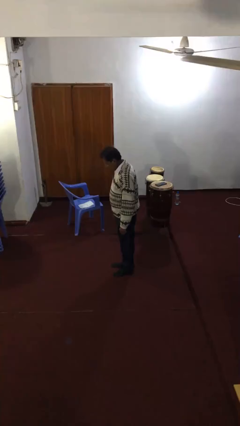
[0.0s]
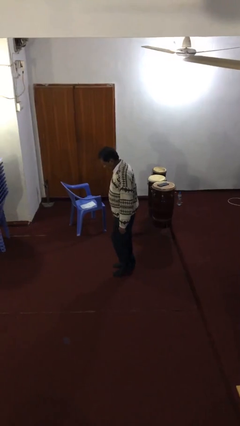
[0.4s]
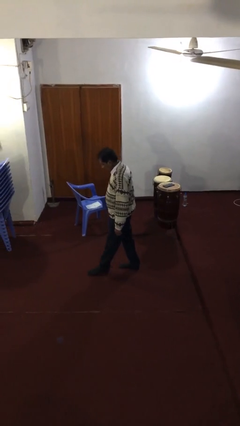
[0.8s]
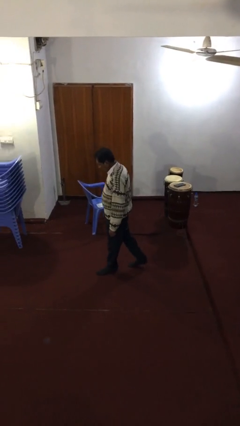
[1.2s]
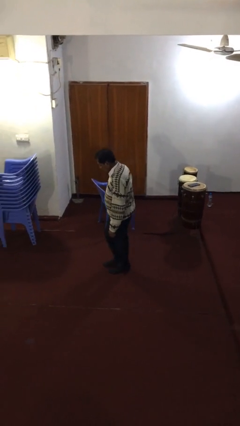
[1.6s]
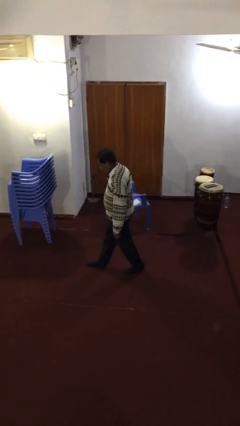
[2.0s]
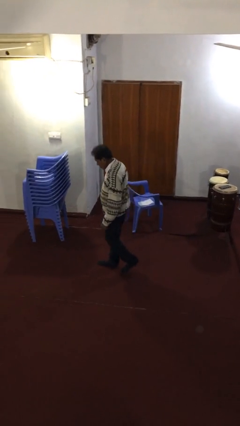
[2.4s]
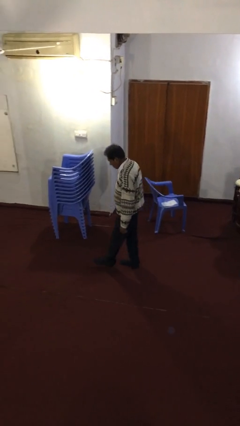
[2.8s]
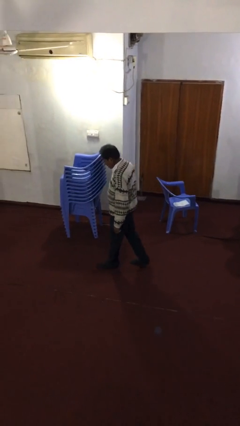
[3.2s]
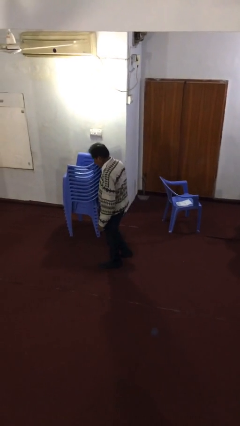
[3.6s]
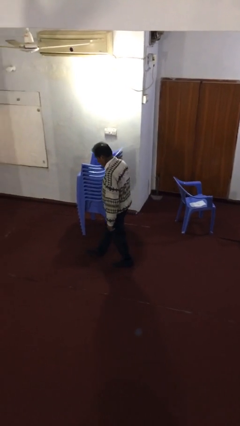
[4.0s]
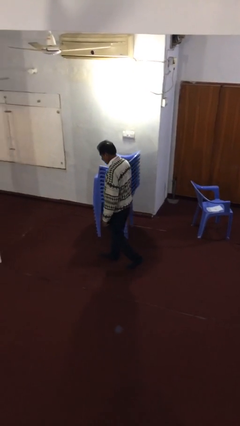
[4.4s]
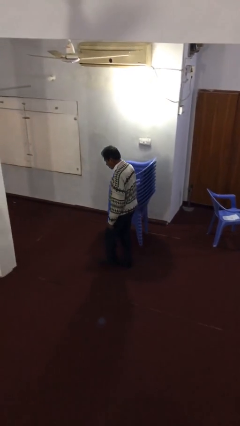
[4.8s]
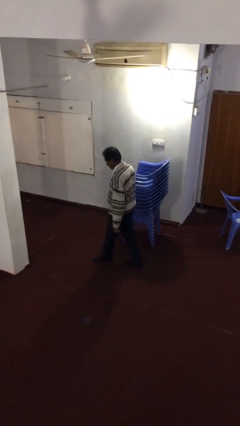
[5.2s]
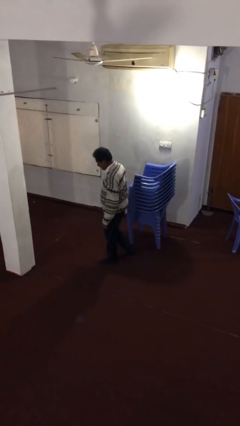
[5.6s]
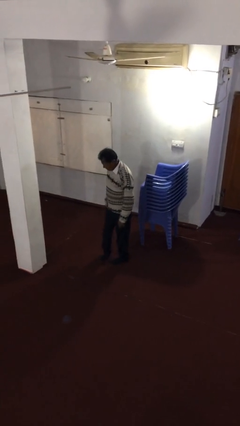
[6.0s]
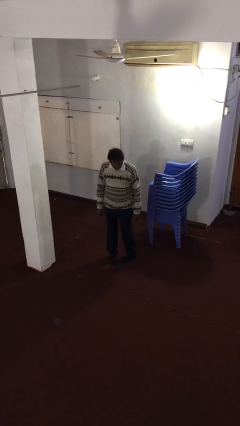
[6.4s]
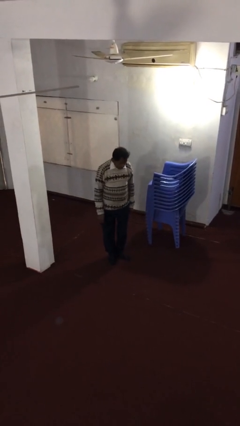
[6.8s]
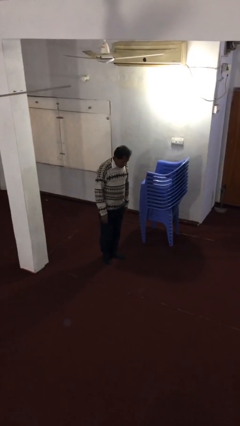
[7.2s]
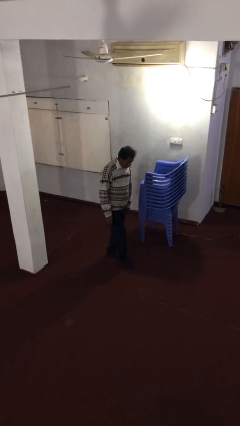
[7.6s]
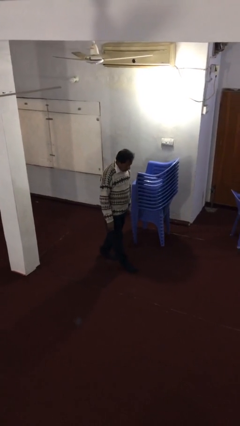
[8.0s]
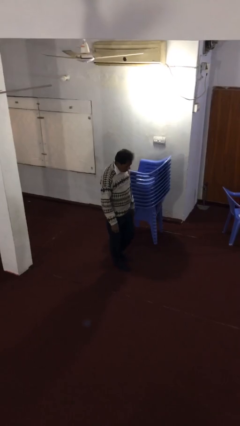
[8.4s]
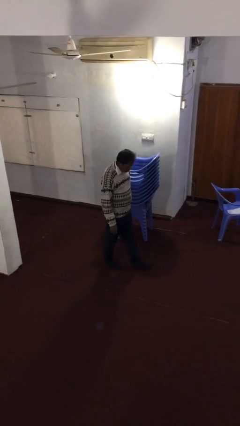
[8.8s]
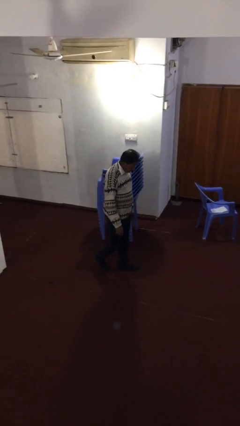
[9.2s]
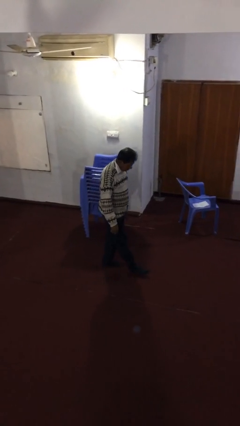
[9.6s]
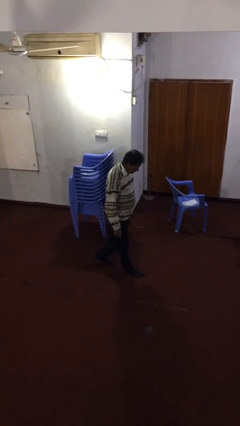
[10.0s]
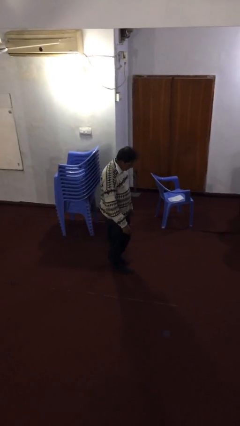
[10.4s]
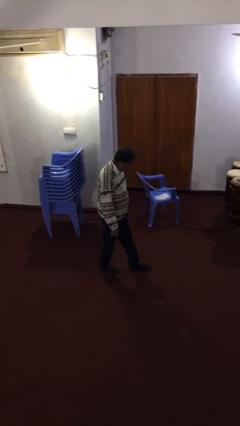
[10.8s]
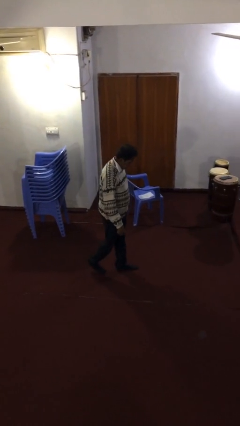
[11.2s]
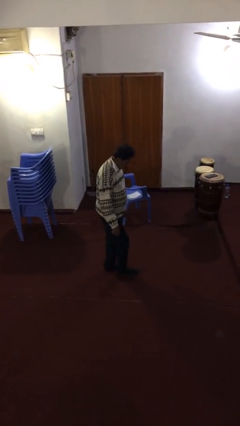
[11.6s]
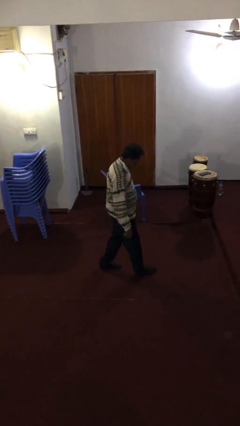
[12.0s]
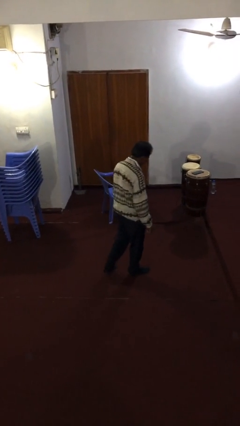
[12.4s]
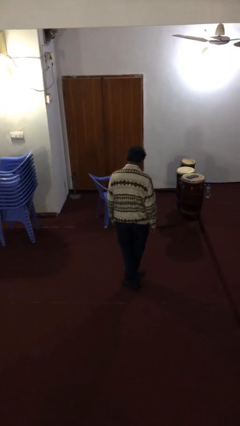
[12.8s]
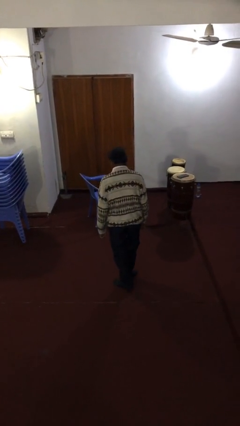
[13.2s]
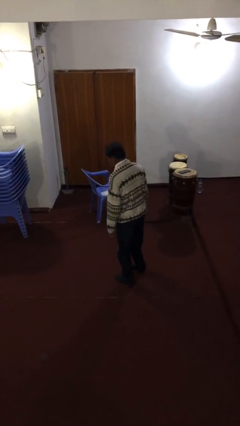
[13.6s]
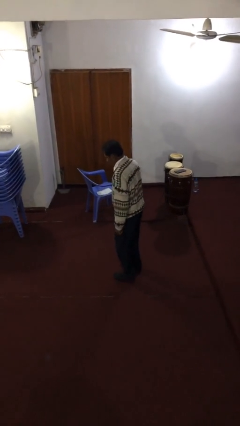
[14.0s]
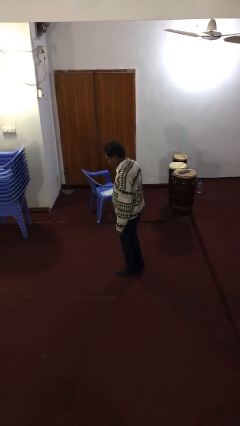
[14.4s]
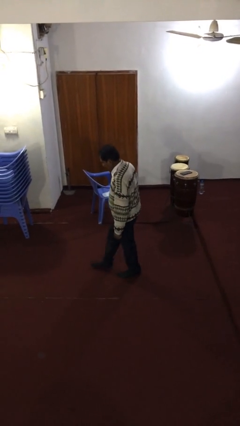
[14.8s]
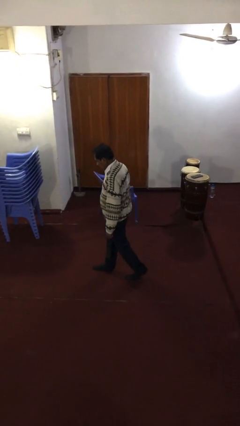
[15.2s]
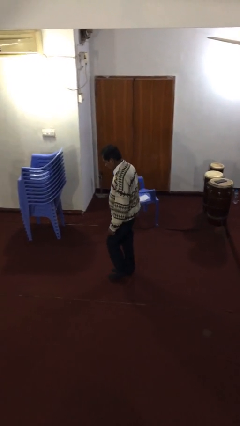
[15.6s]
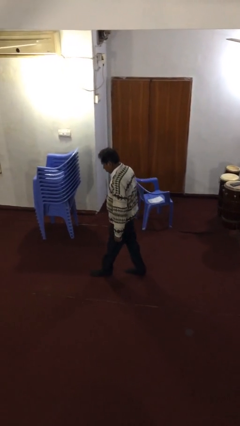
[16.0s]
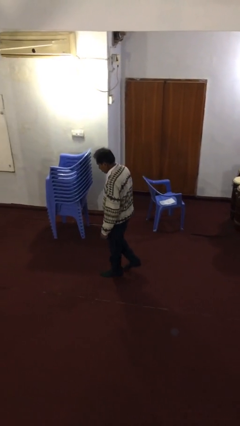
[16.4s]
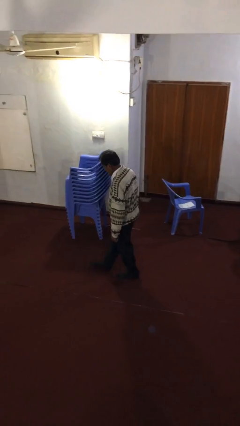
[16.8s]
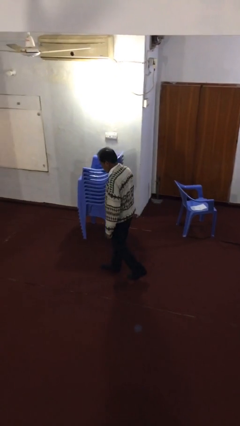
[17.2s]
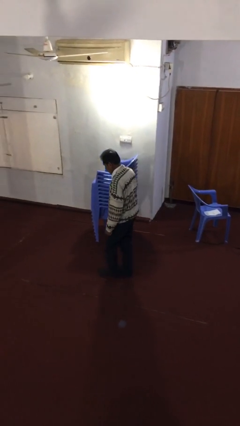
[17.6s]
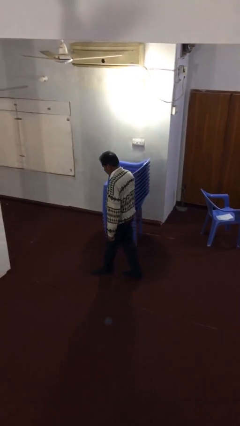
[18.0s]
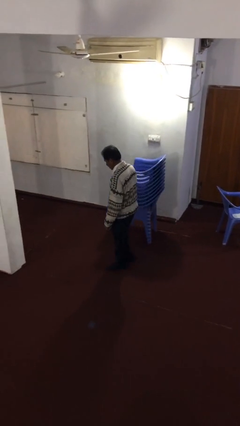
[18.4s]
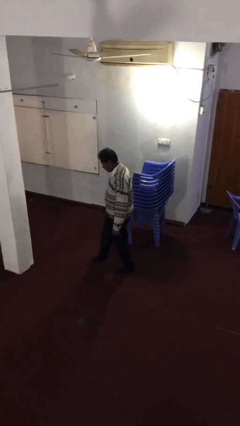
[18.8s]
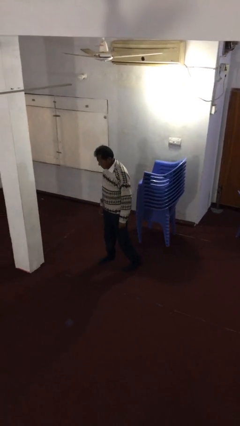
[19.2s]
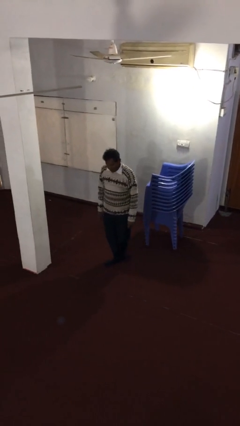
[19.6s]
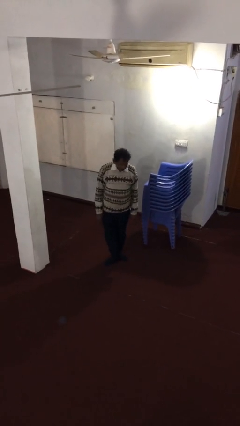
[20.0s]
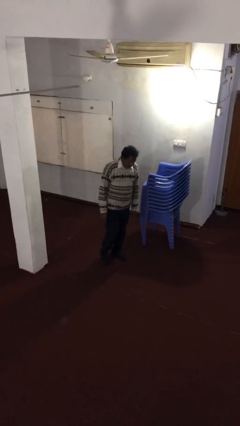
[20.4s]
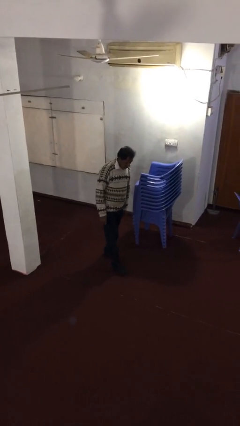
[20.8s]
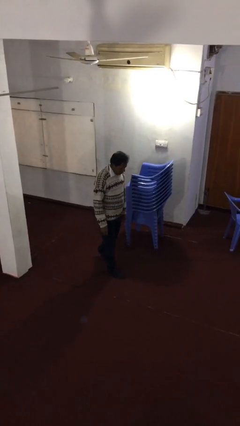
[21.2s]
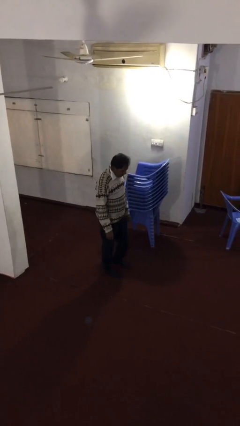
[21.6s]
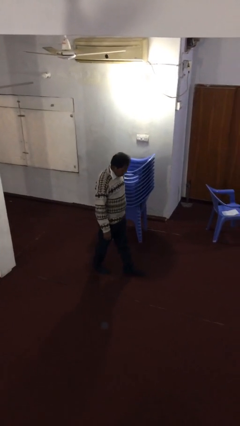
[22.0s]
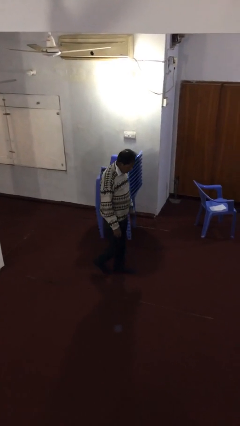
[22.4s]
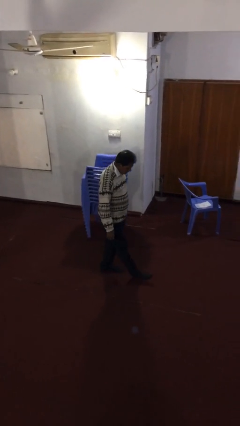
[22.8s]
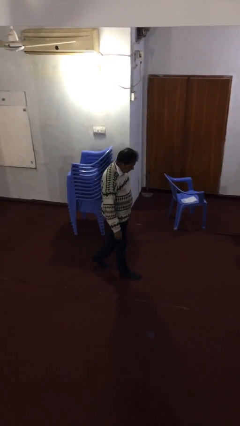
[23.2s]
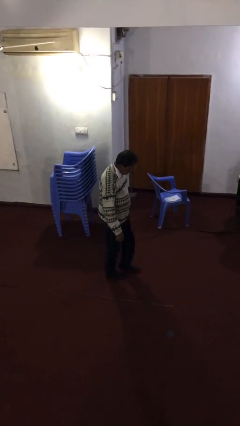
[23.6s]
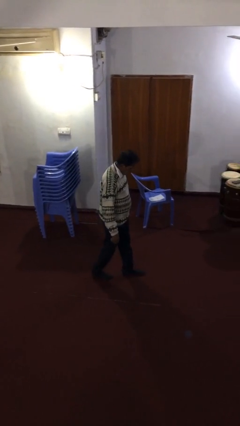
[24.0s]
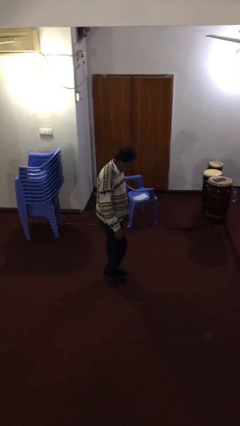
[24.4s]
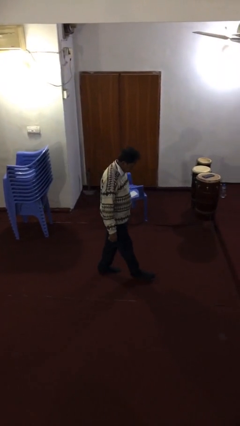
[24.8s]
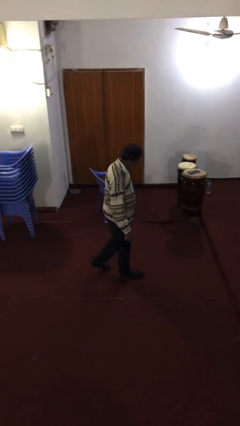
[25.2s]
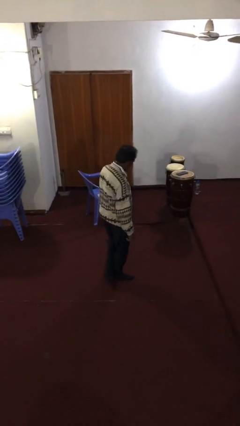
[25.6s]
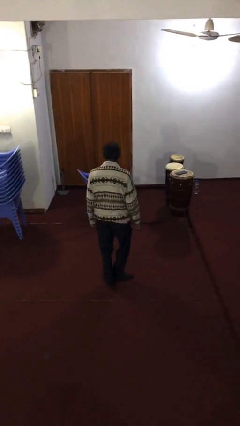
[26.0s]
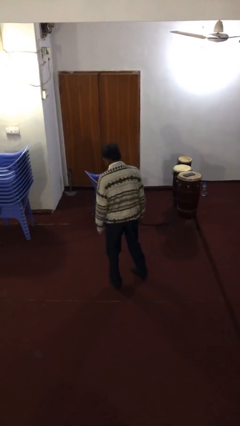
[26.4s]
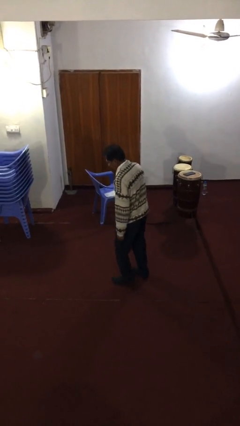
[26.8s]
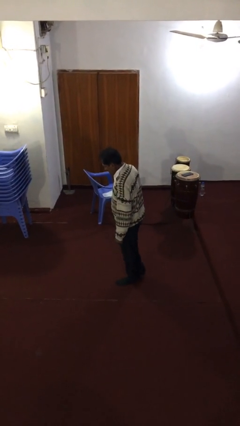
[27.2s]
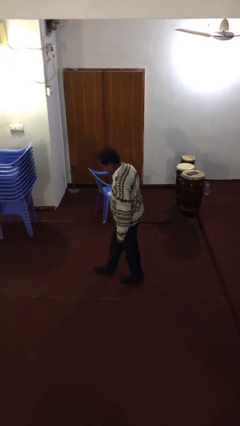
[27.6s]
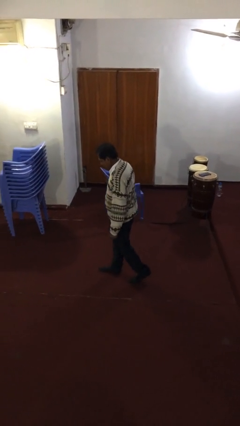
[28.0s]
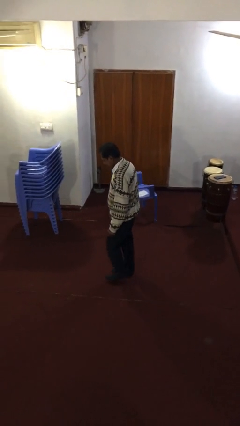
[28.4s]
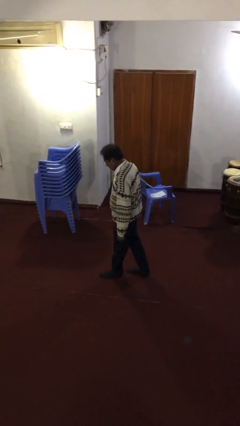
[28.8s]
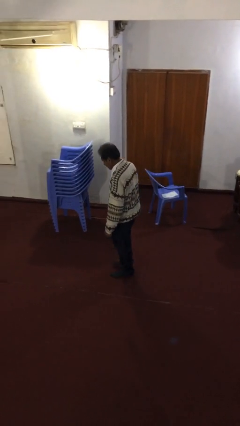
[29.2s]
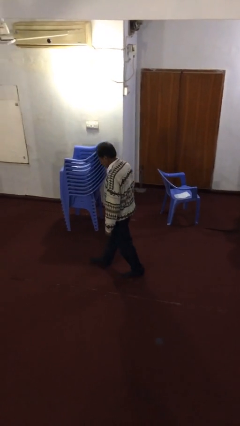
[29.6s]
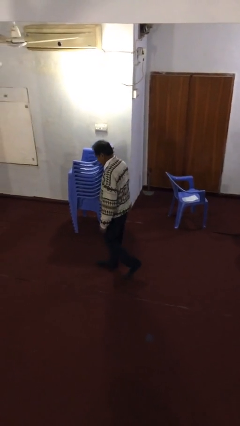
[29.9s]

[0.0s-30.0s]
person walks

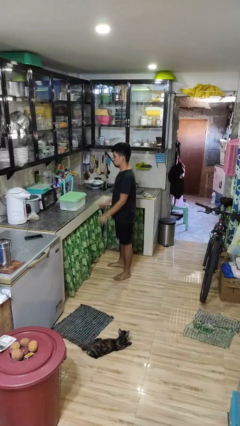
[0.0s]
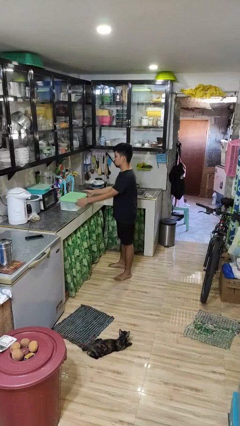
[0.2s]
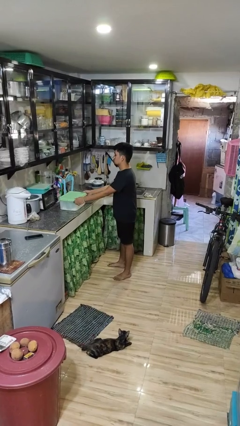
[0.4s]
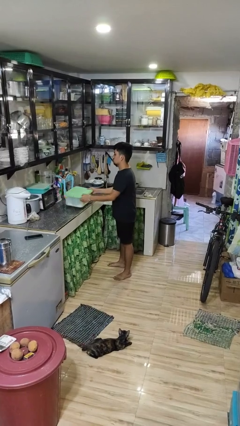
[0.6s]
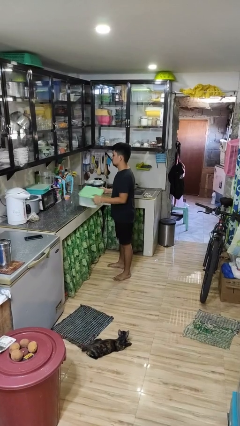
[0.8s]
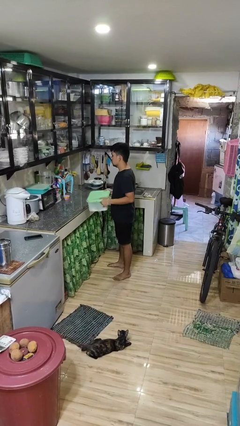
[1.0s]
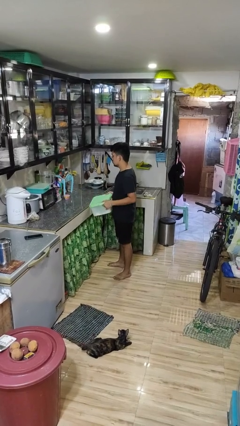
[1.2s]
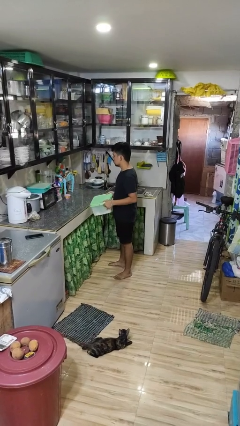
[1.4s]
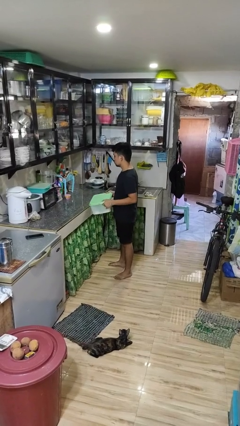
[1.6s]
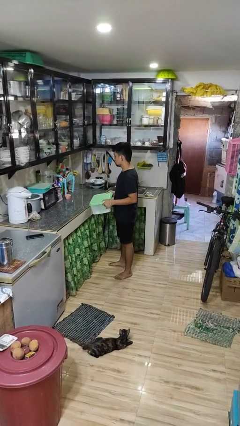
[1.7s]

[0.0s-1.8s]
person picks up object from countertop

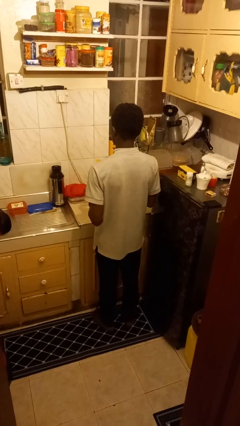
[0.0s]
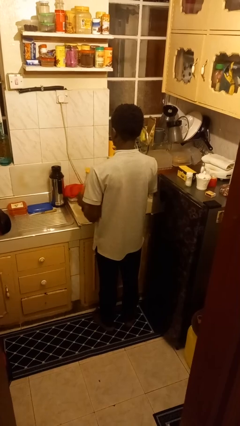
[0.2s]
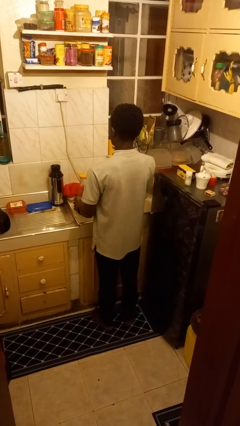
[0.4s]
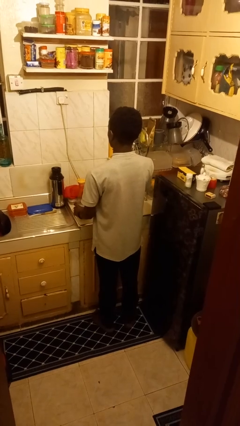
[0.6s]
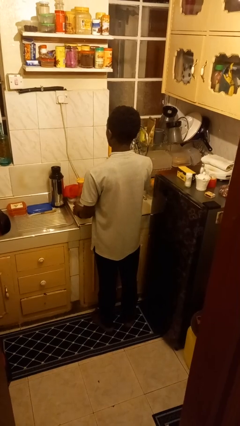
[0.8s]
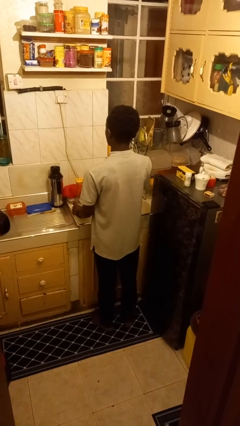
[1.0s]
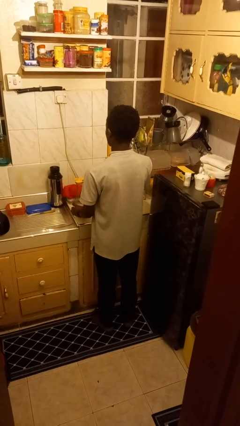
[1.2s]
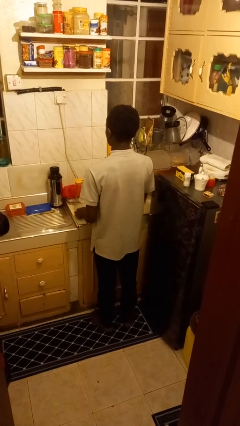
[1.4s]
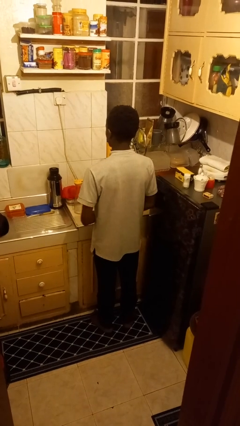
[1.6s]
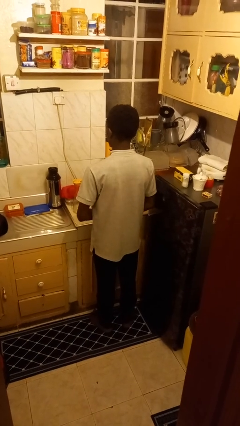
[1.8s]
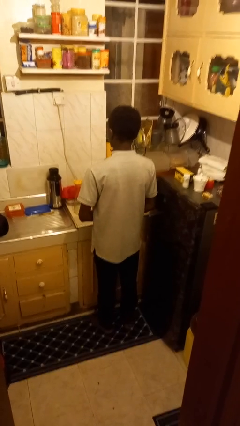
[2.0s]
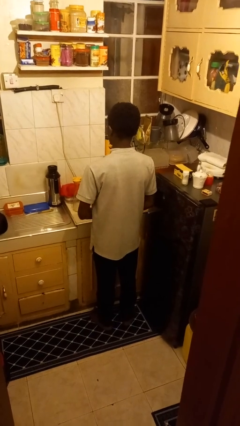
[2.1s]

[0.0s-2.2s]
person puts down object on countertop
